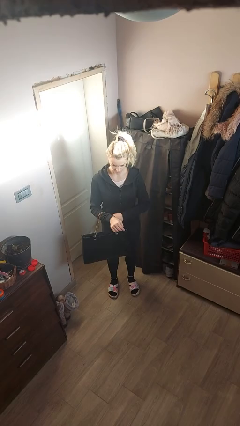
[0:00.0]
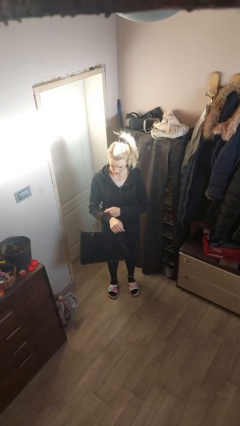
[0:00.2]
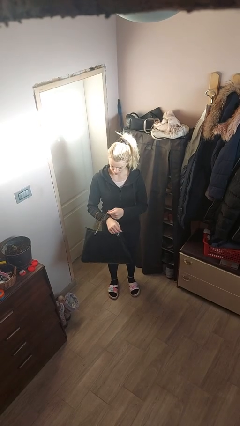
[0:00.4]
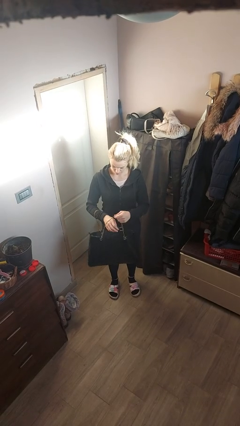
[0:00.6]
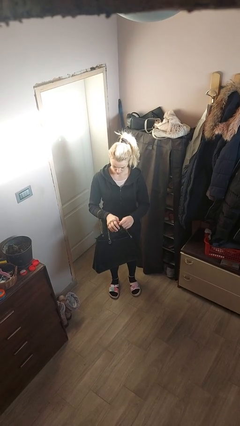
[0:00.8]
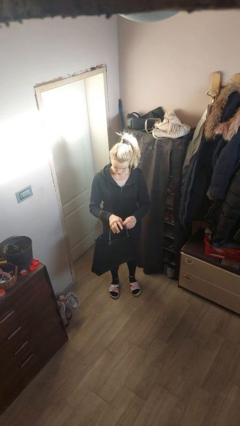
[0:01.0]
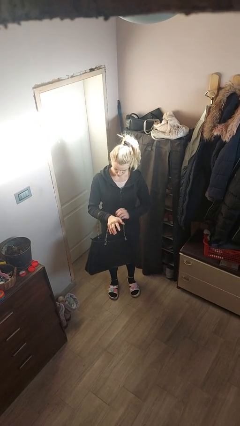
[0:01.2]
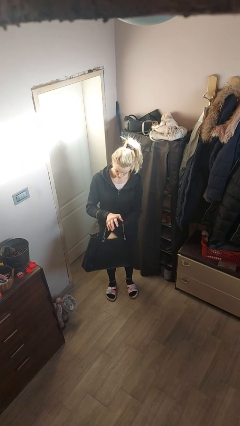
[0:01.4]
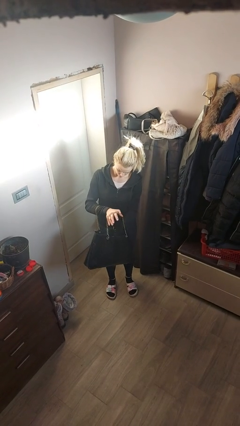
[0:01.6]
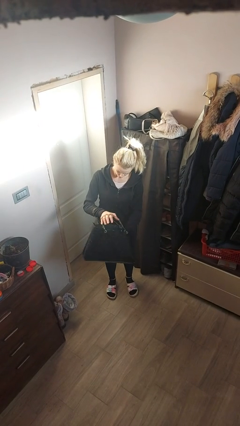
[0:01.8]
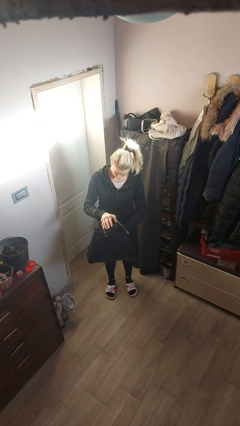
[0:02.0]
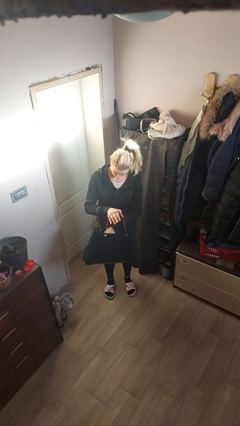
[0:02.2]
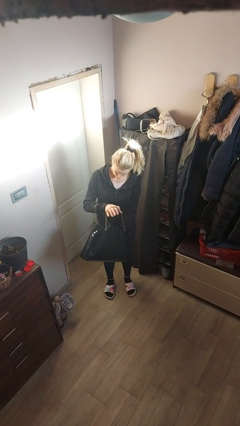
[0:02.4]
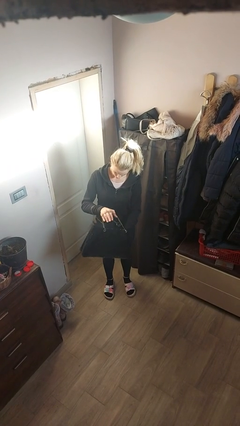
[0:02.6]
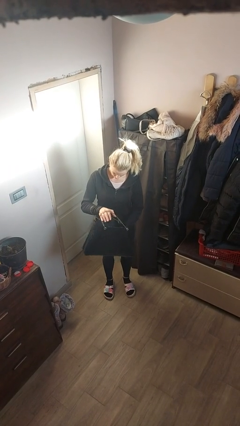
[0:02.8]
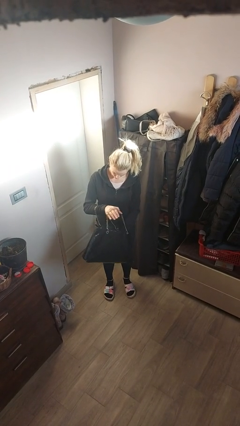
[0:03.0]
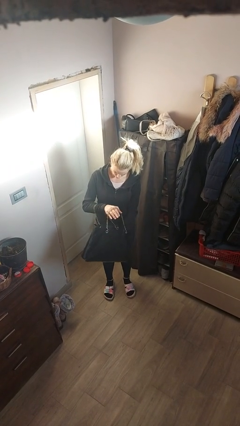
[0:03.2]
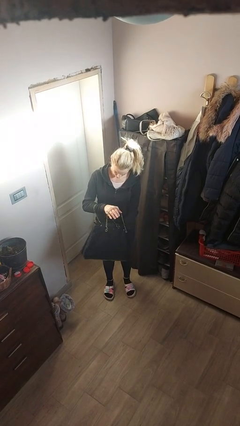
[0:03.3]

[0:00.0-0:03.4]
person searches in purse

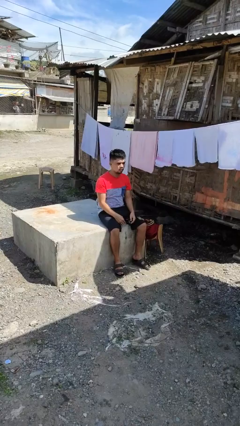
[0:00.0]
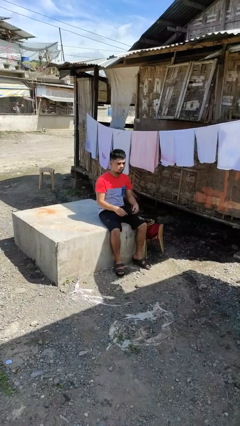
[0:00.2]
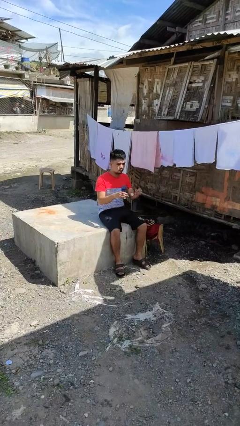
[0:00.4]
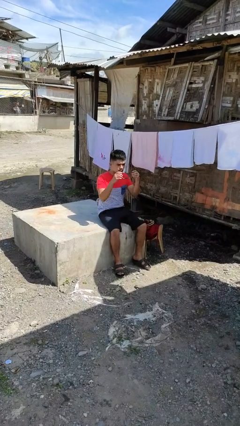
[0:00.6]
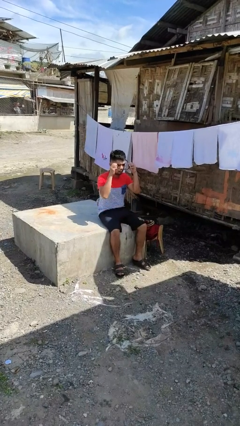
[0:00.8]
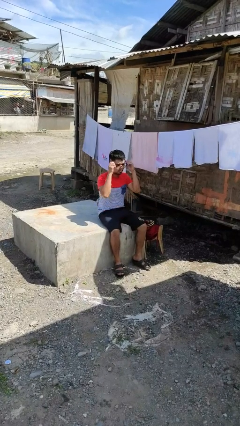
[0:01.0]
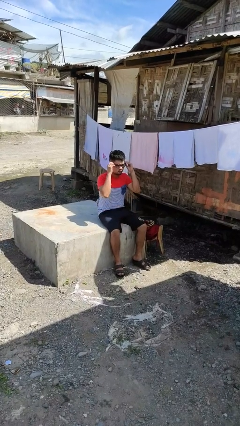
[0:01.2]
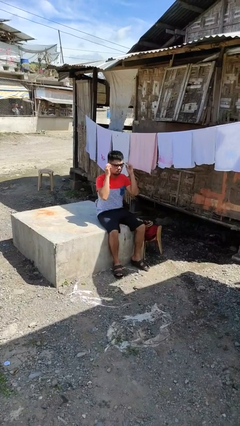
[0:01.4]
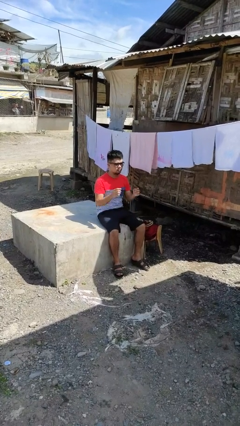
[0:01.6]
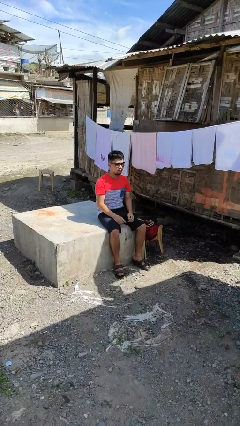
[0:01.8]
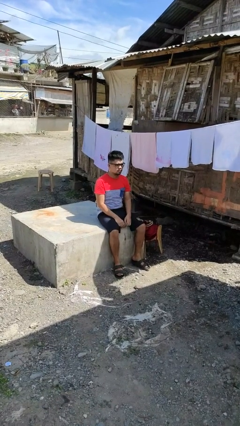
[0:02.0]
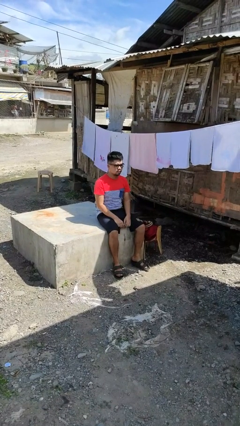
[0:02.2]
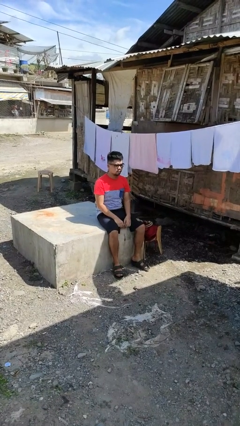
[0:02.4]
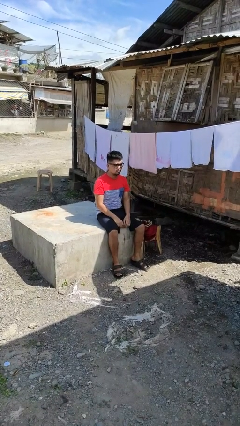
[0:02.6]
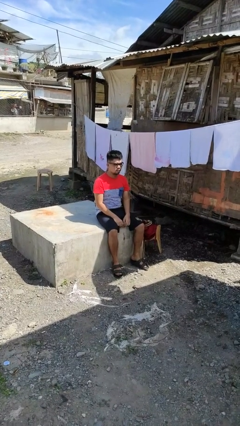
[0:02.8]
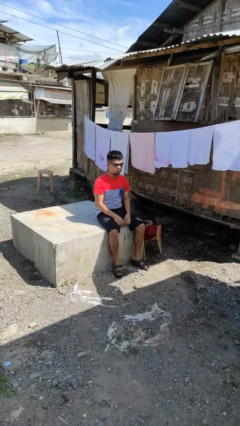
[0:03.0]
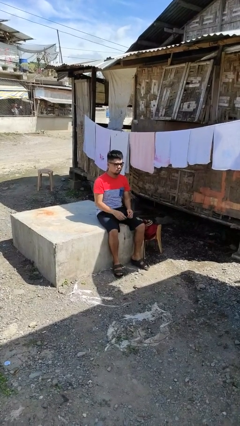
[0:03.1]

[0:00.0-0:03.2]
person puts on glasses

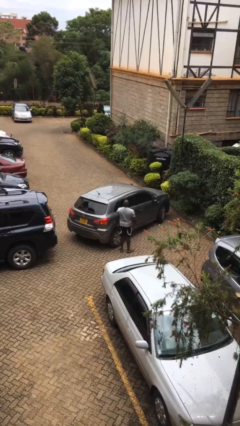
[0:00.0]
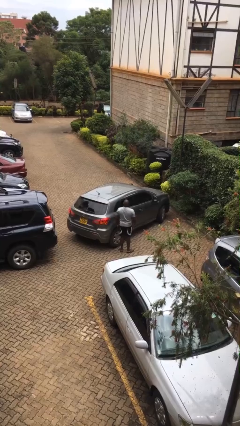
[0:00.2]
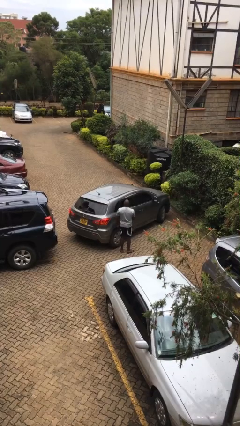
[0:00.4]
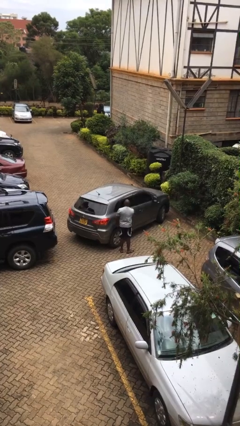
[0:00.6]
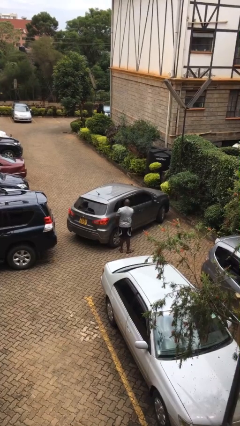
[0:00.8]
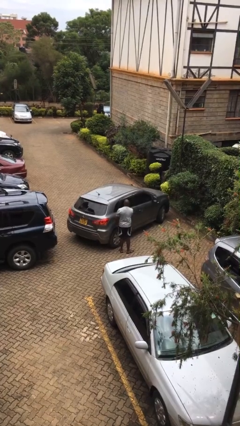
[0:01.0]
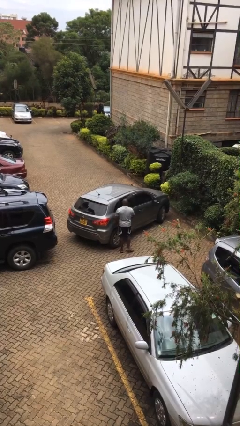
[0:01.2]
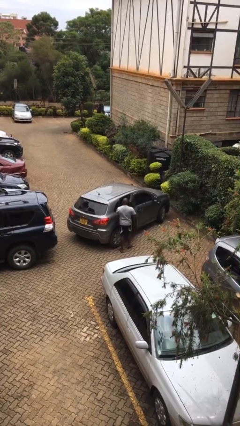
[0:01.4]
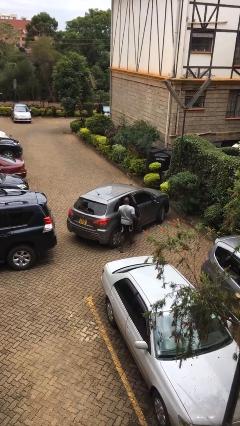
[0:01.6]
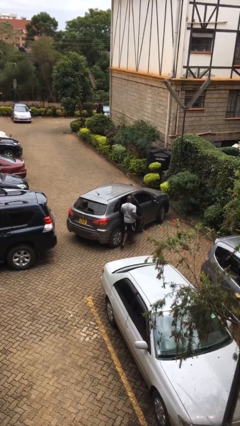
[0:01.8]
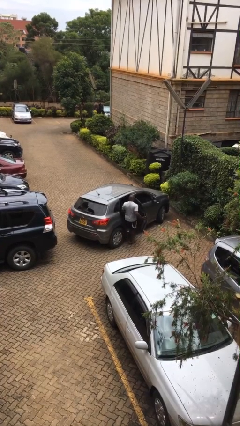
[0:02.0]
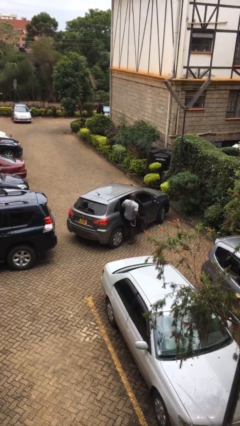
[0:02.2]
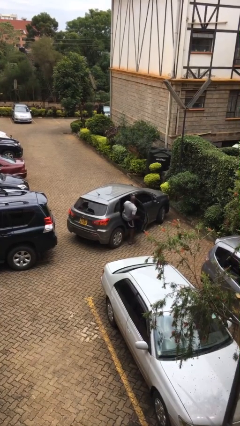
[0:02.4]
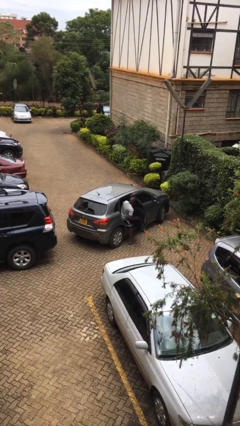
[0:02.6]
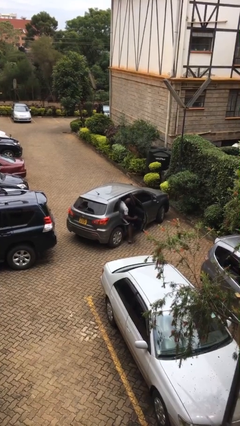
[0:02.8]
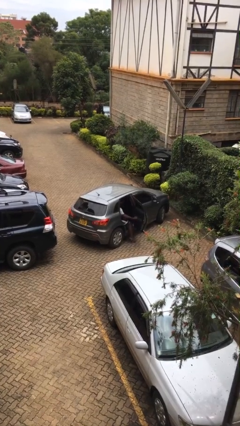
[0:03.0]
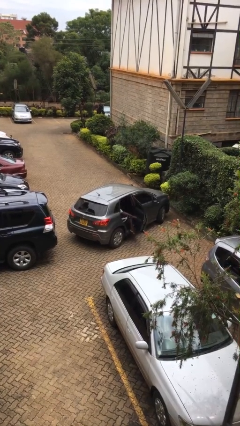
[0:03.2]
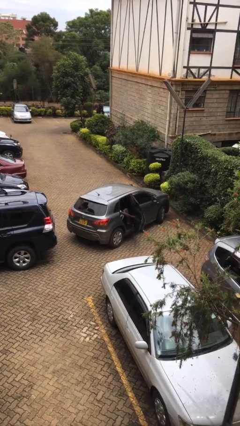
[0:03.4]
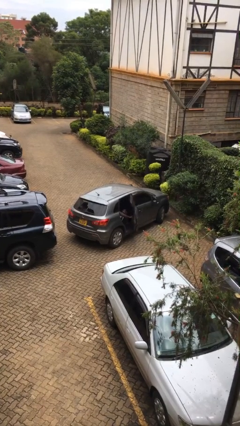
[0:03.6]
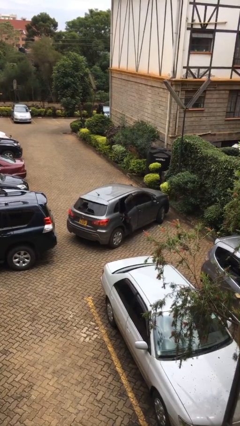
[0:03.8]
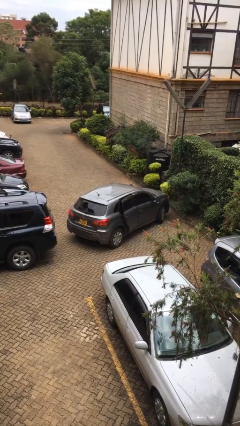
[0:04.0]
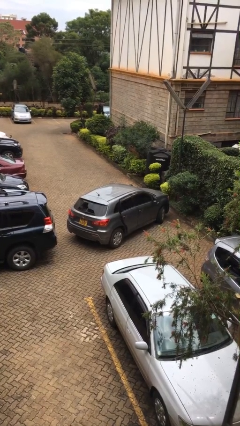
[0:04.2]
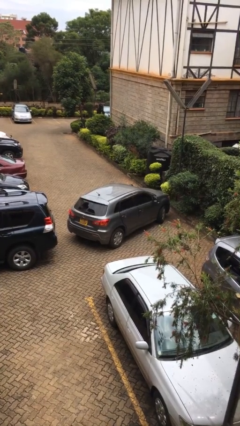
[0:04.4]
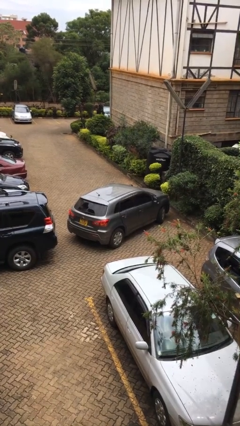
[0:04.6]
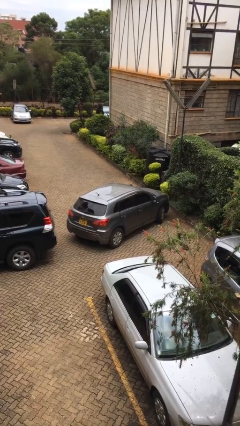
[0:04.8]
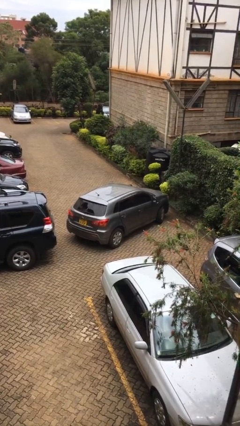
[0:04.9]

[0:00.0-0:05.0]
car picks up person

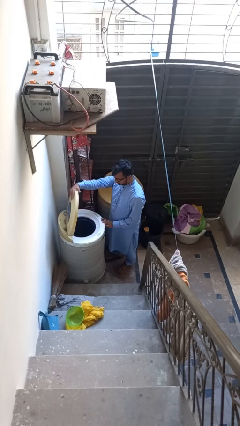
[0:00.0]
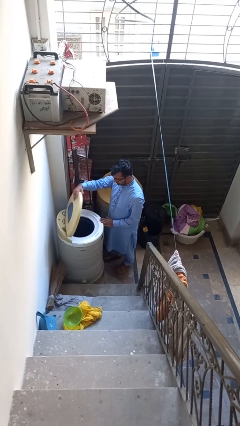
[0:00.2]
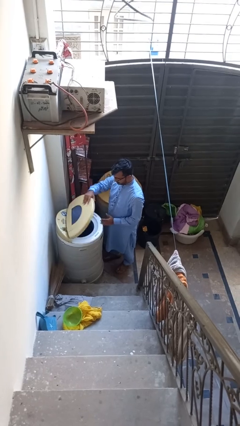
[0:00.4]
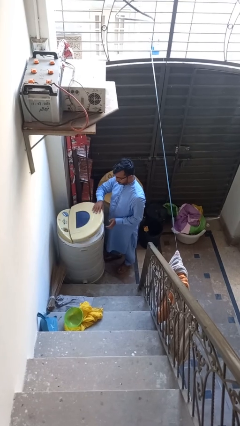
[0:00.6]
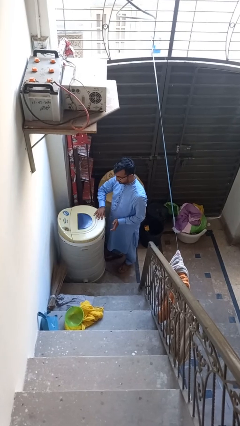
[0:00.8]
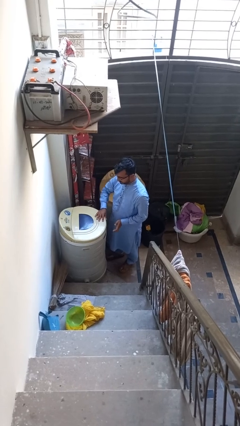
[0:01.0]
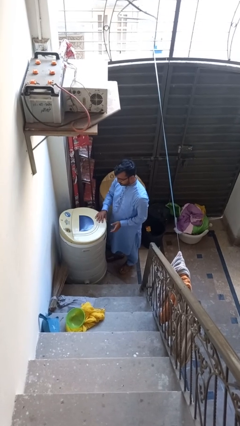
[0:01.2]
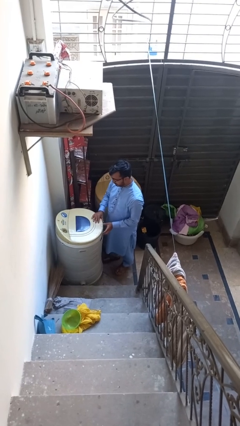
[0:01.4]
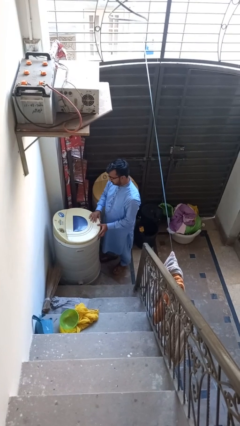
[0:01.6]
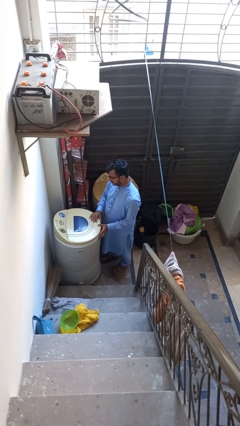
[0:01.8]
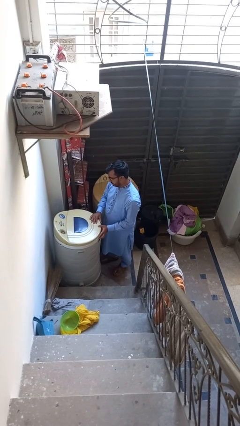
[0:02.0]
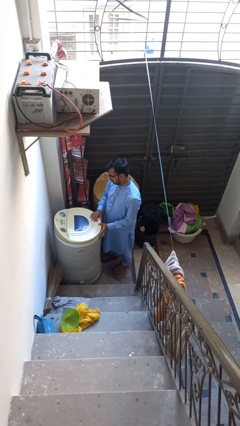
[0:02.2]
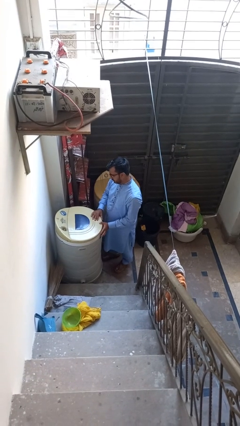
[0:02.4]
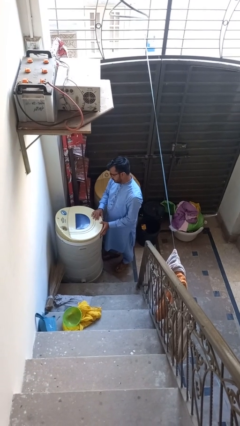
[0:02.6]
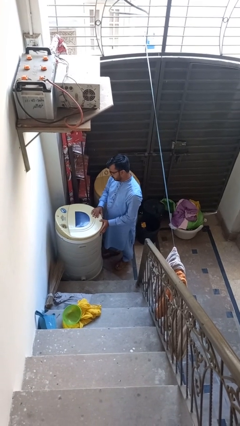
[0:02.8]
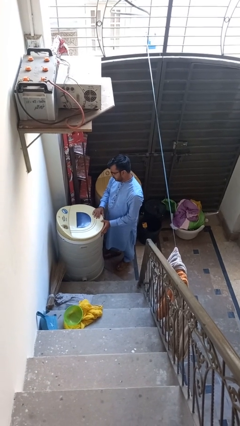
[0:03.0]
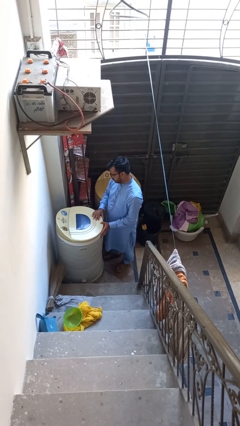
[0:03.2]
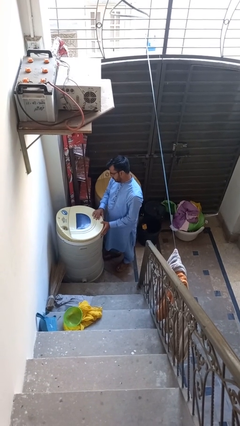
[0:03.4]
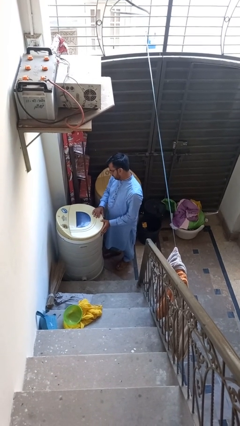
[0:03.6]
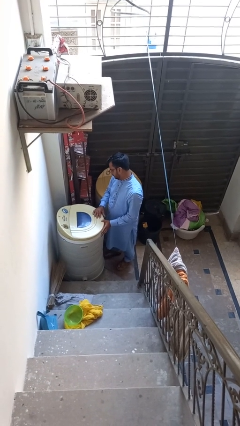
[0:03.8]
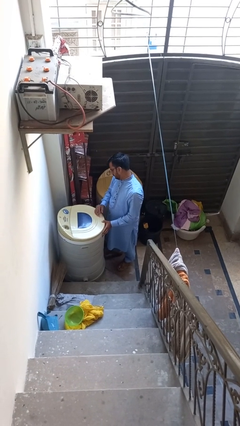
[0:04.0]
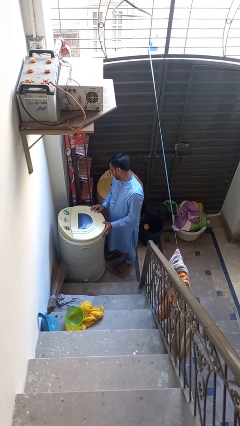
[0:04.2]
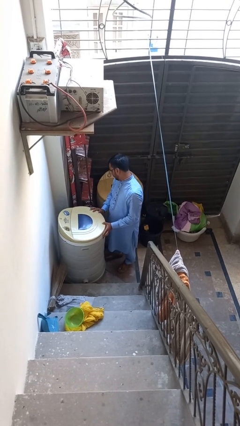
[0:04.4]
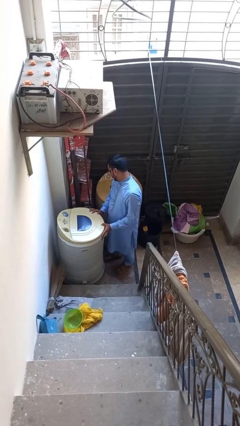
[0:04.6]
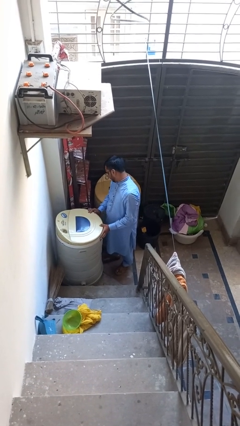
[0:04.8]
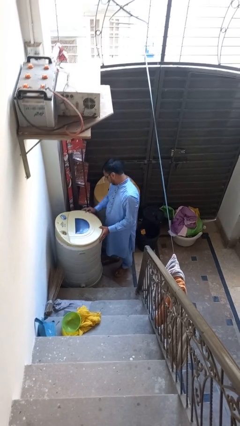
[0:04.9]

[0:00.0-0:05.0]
person closes clothes washer

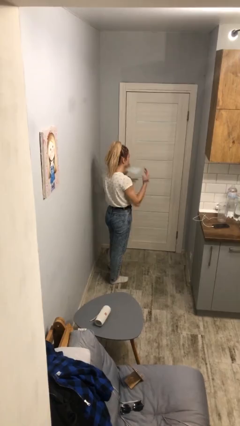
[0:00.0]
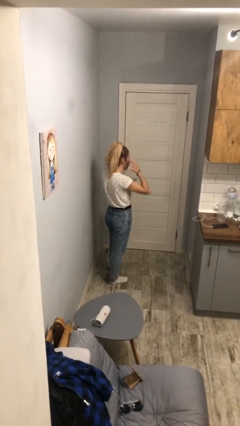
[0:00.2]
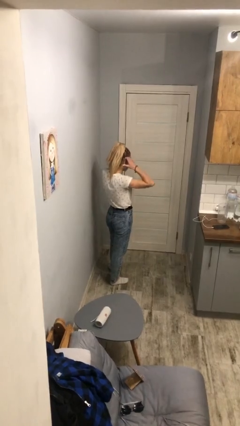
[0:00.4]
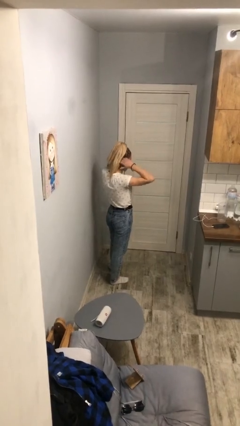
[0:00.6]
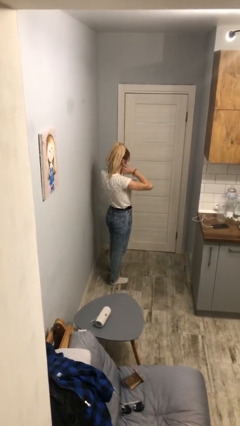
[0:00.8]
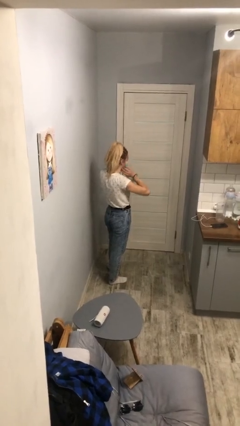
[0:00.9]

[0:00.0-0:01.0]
person puts on facemask

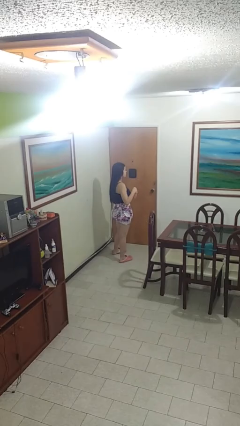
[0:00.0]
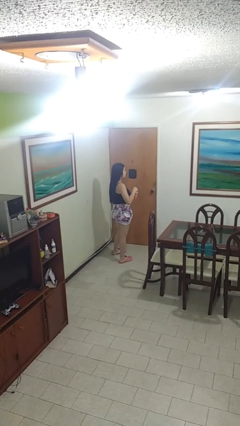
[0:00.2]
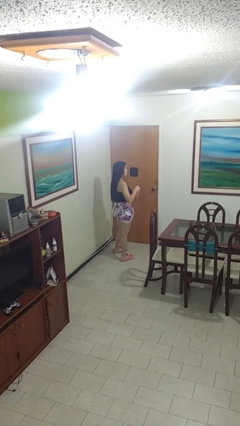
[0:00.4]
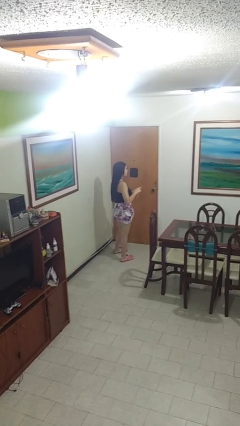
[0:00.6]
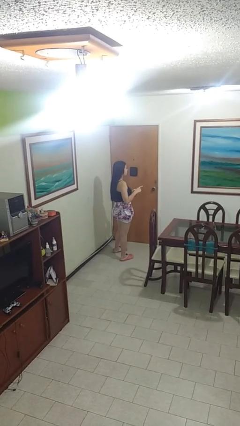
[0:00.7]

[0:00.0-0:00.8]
person stirs mug
